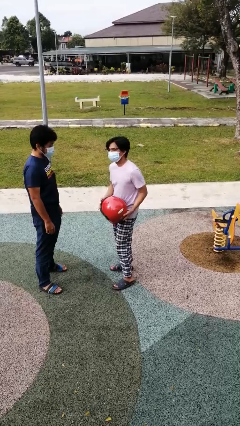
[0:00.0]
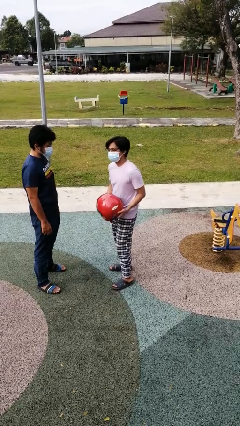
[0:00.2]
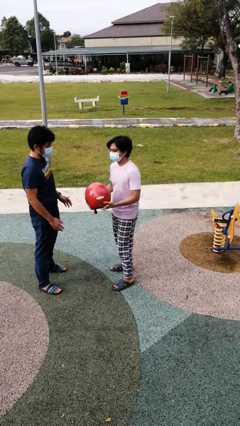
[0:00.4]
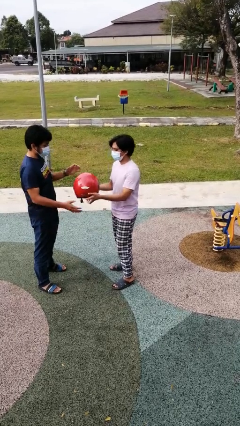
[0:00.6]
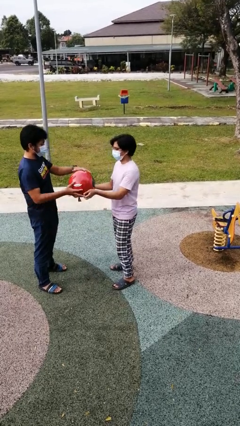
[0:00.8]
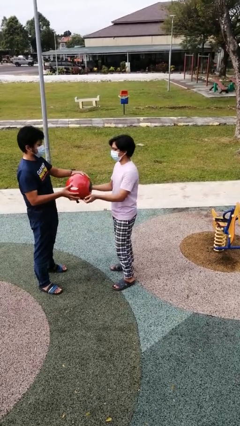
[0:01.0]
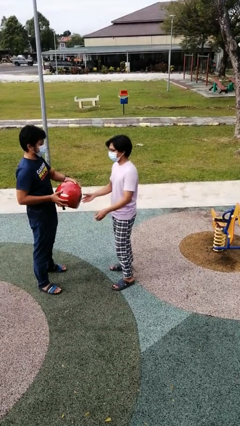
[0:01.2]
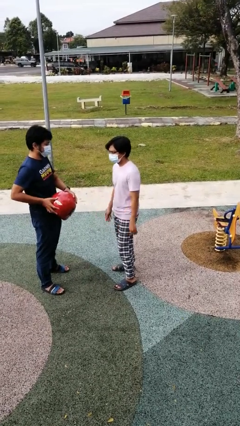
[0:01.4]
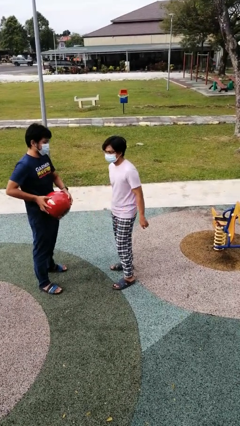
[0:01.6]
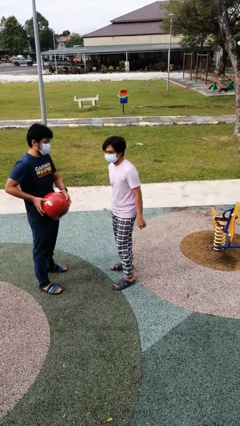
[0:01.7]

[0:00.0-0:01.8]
person transfers object to person

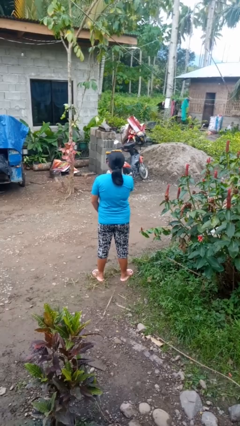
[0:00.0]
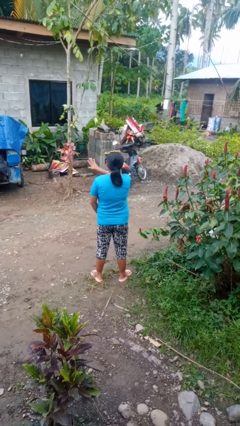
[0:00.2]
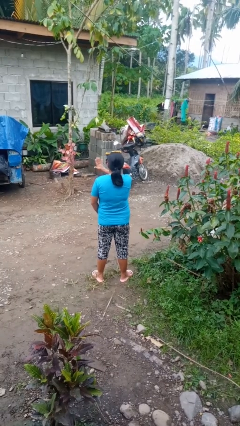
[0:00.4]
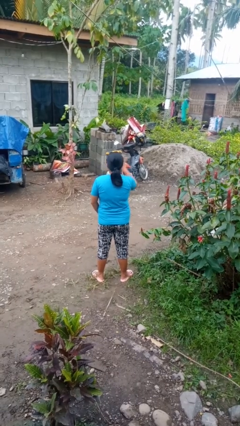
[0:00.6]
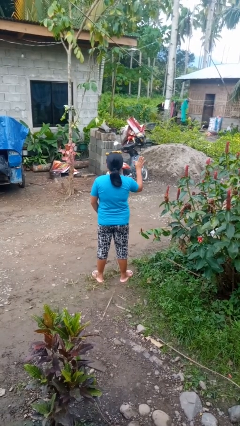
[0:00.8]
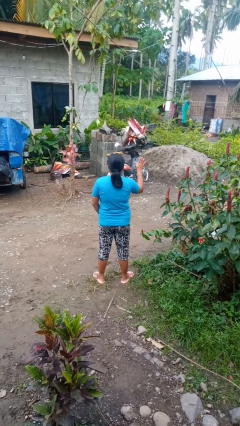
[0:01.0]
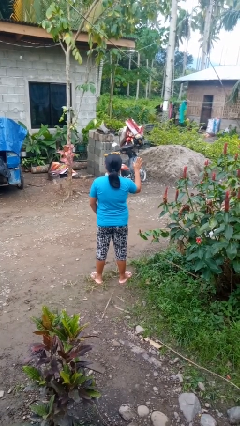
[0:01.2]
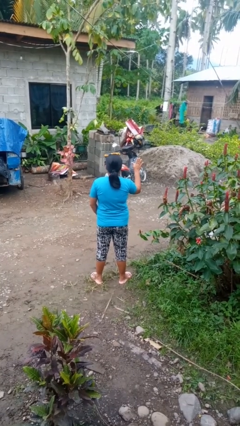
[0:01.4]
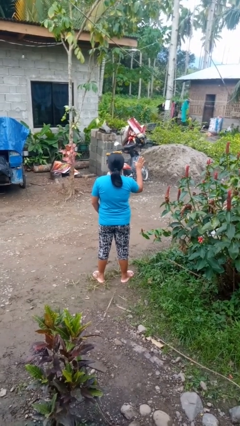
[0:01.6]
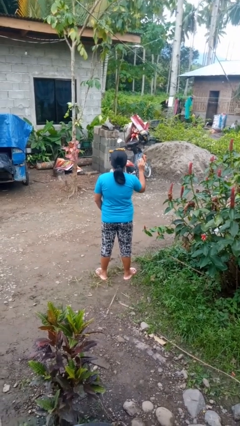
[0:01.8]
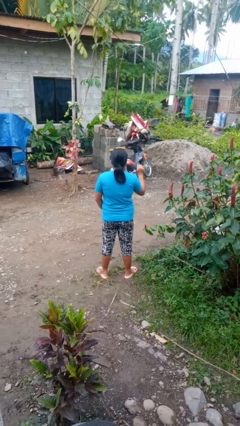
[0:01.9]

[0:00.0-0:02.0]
person gestures swipe right

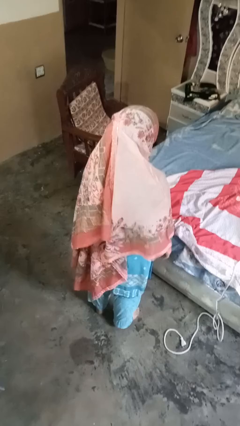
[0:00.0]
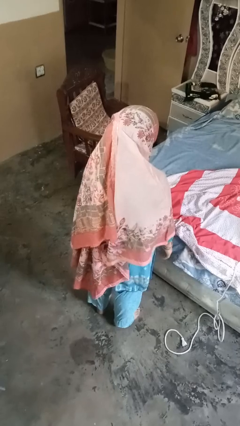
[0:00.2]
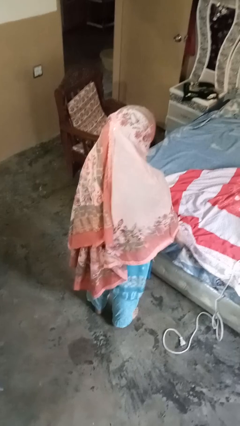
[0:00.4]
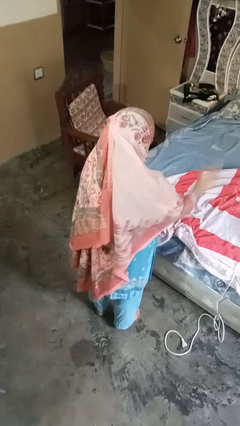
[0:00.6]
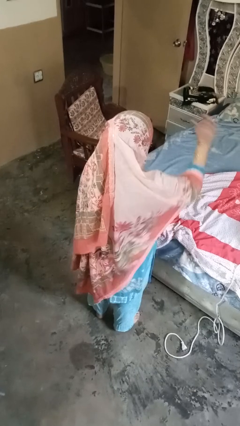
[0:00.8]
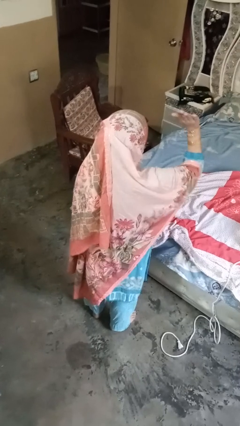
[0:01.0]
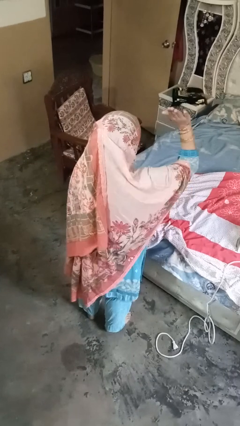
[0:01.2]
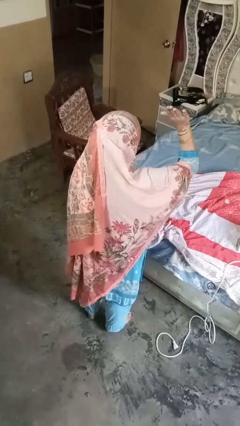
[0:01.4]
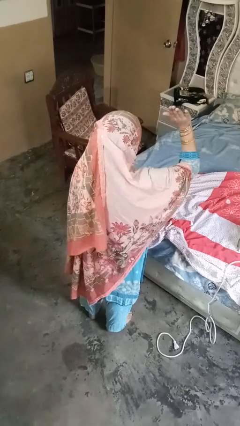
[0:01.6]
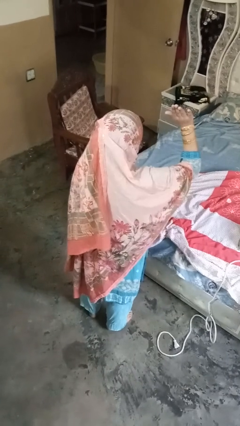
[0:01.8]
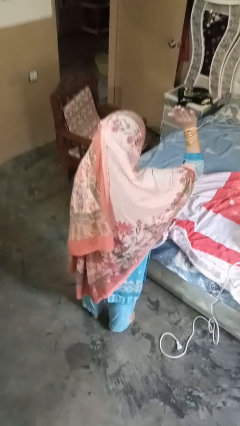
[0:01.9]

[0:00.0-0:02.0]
person handstand

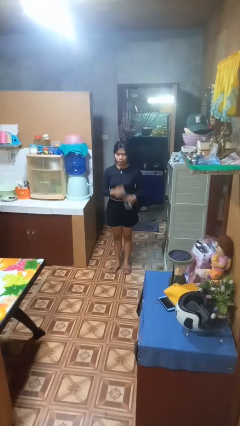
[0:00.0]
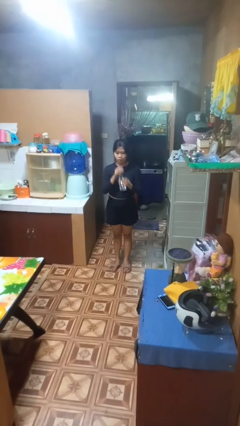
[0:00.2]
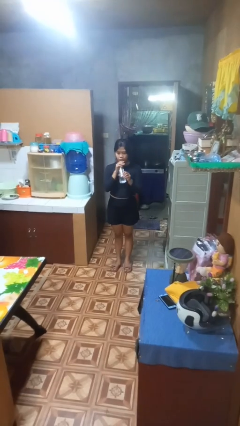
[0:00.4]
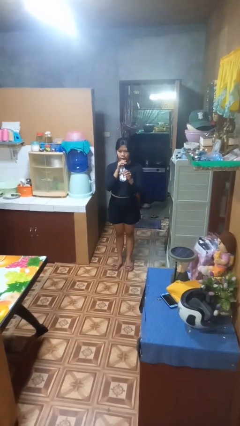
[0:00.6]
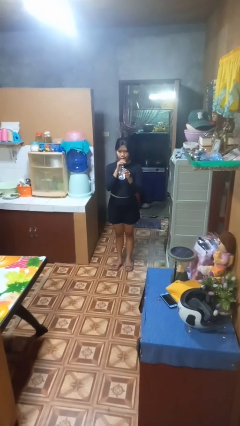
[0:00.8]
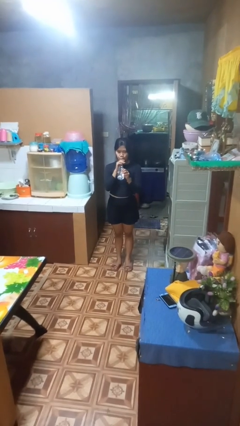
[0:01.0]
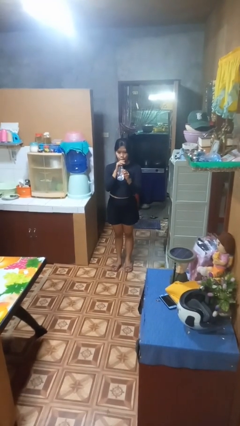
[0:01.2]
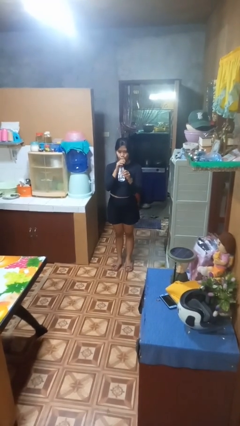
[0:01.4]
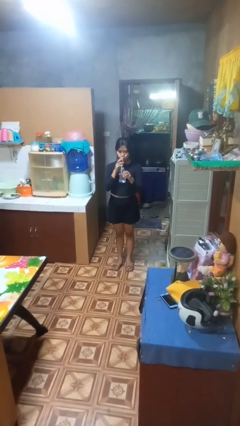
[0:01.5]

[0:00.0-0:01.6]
person drinks from straw

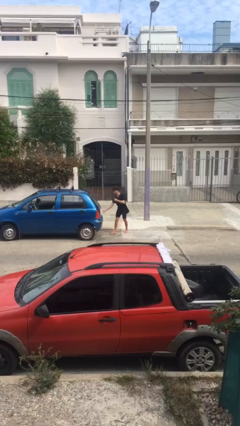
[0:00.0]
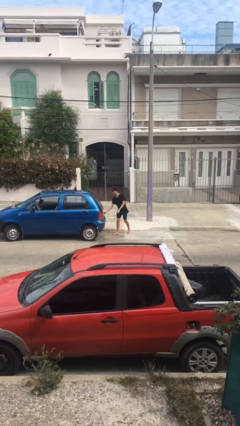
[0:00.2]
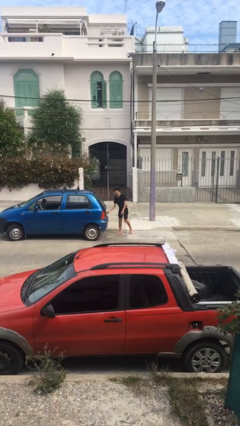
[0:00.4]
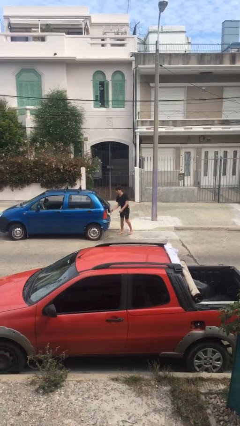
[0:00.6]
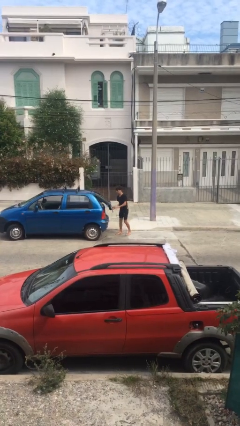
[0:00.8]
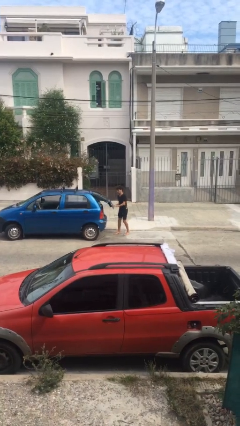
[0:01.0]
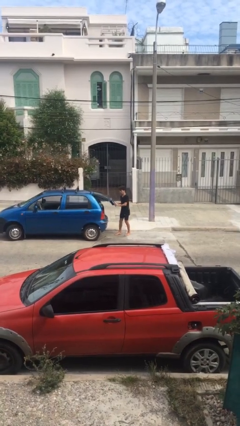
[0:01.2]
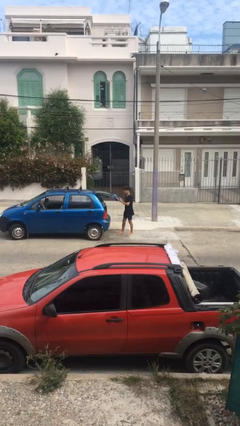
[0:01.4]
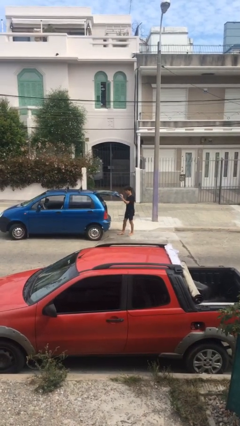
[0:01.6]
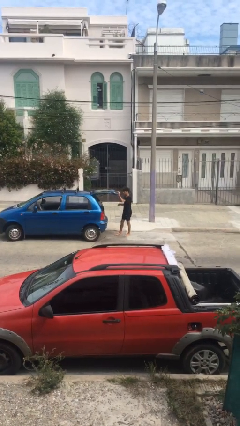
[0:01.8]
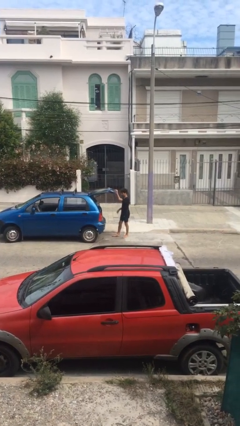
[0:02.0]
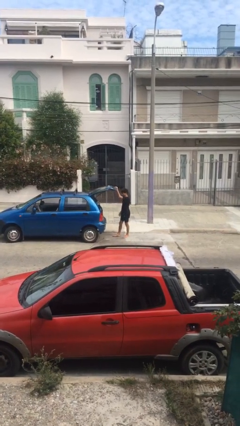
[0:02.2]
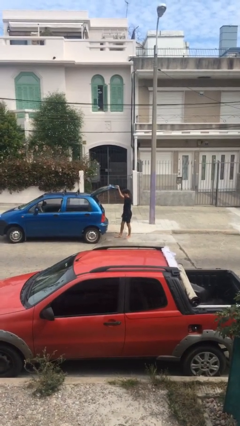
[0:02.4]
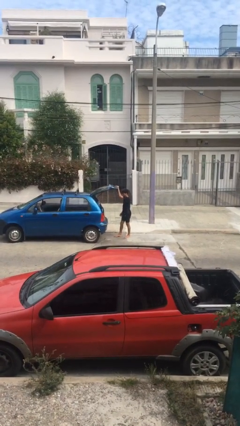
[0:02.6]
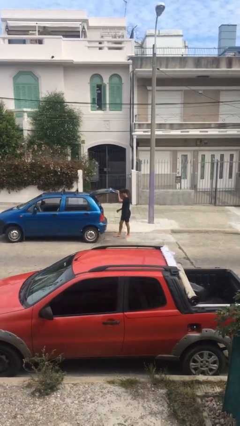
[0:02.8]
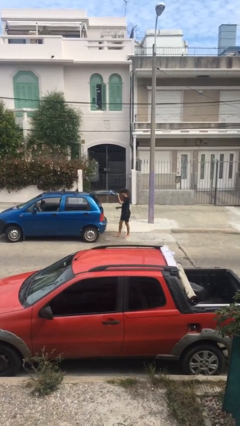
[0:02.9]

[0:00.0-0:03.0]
person opens car trunk

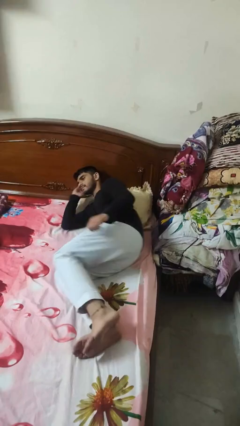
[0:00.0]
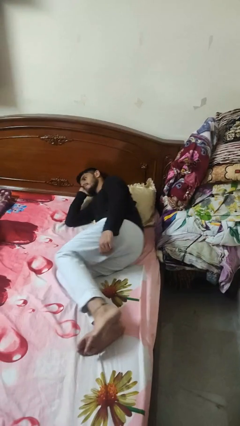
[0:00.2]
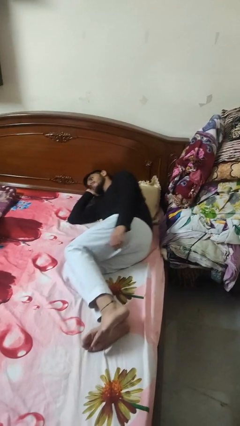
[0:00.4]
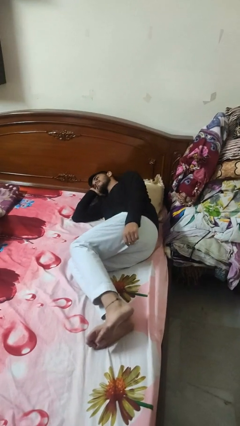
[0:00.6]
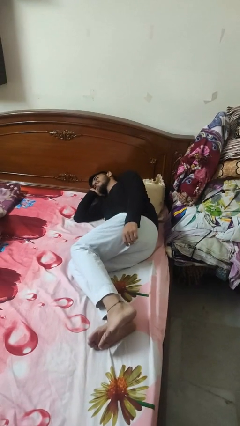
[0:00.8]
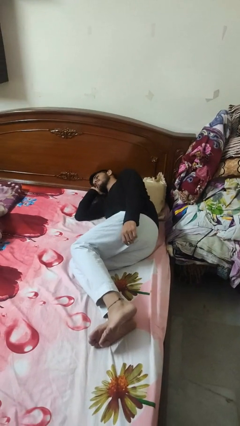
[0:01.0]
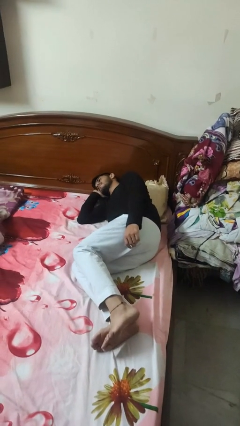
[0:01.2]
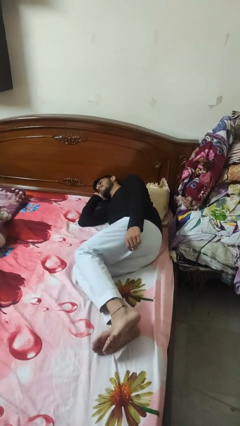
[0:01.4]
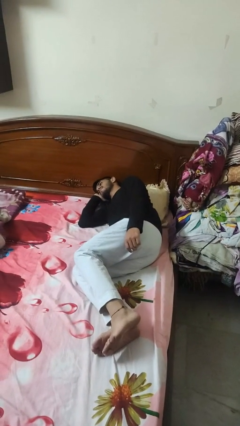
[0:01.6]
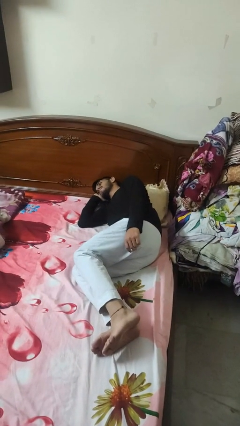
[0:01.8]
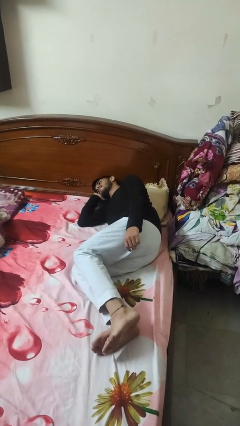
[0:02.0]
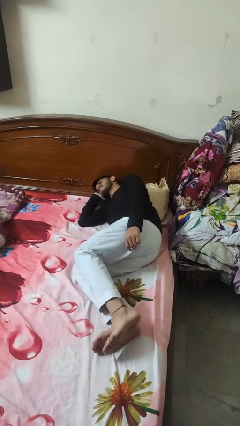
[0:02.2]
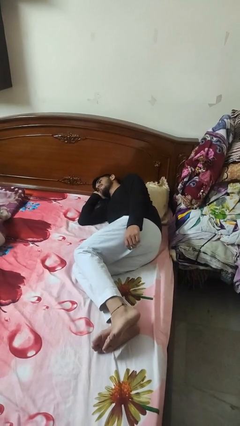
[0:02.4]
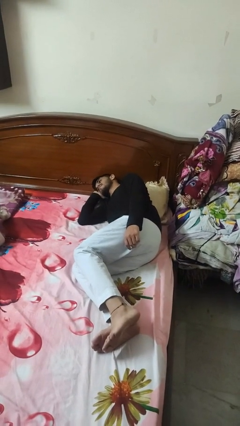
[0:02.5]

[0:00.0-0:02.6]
person lies down on bed

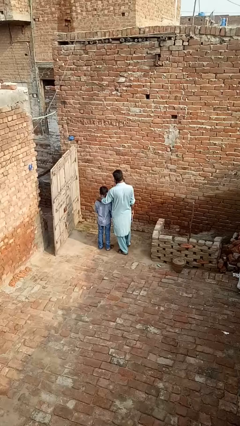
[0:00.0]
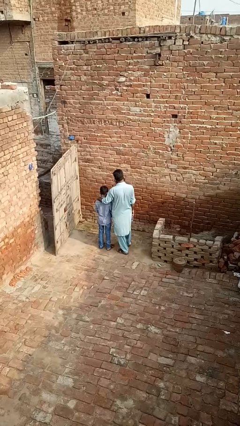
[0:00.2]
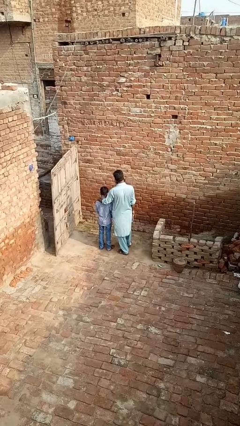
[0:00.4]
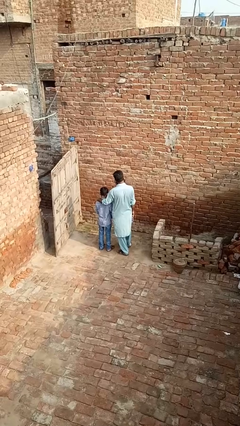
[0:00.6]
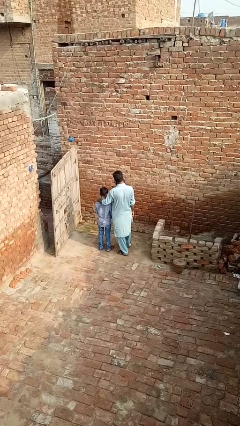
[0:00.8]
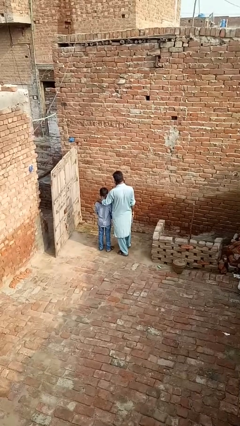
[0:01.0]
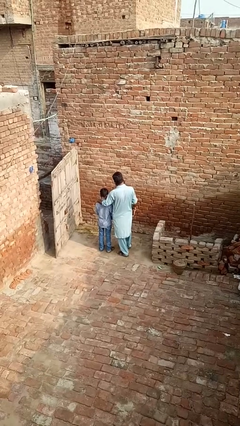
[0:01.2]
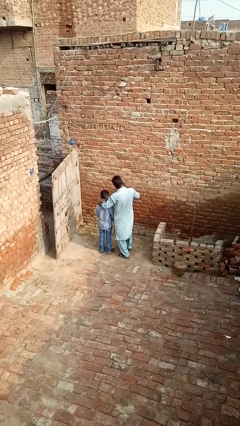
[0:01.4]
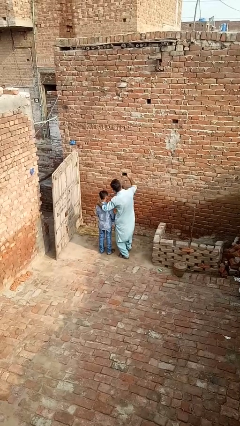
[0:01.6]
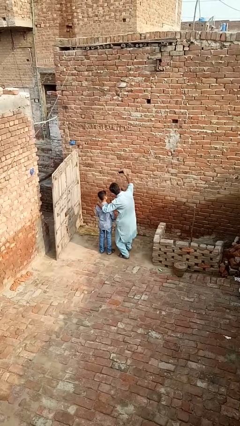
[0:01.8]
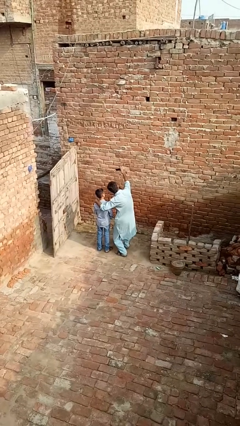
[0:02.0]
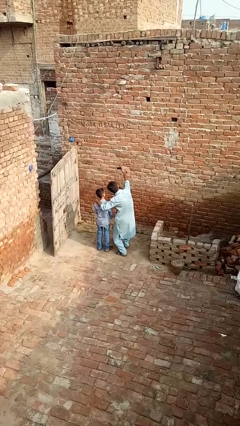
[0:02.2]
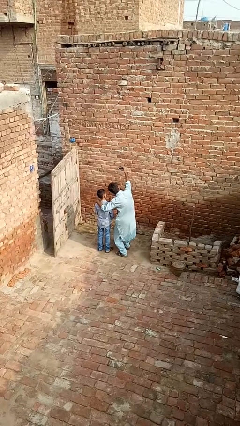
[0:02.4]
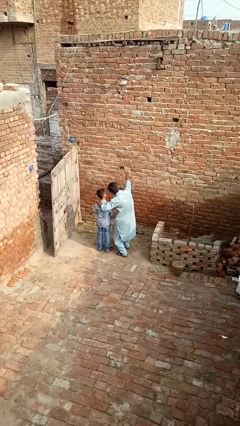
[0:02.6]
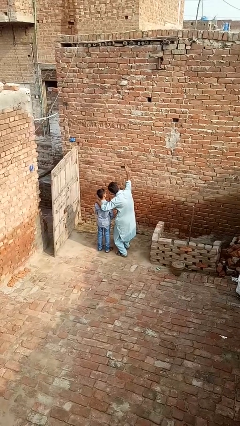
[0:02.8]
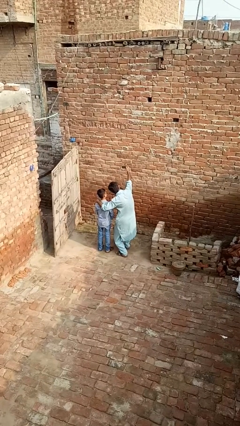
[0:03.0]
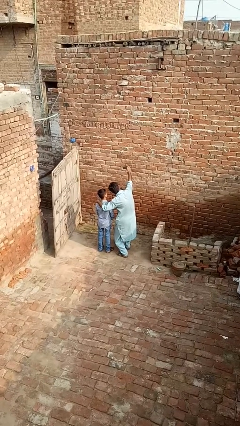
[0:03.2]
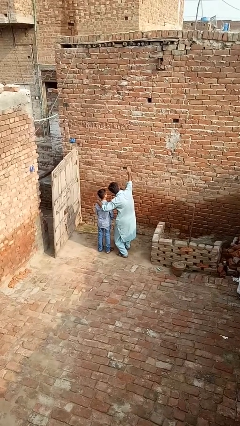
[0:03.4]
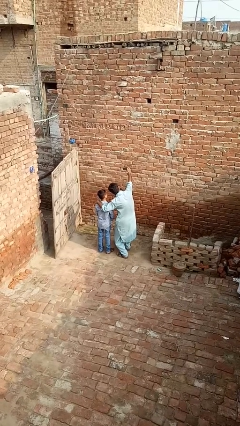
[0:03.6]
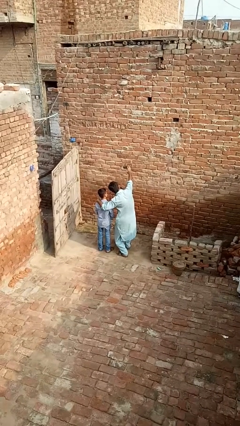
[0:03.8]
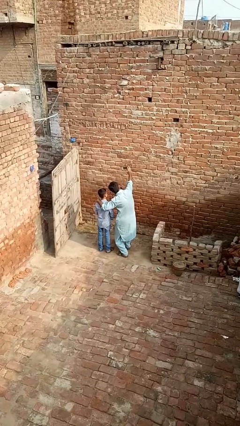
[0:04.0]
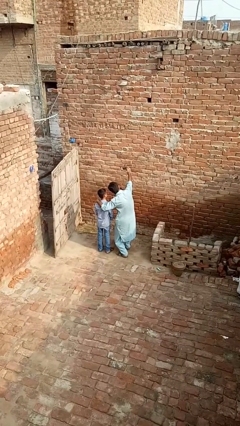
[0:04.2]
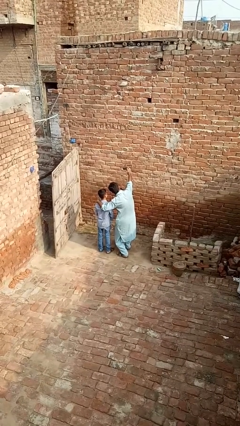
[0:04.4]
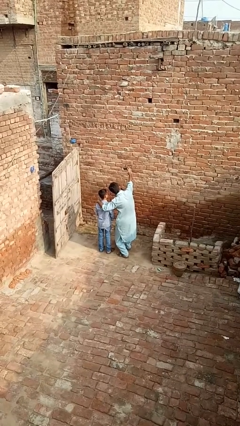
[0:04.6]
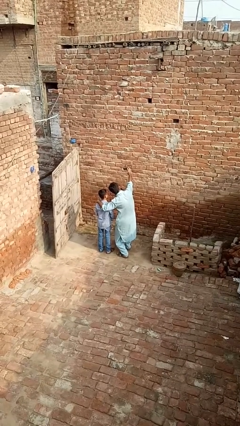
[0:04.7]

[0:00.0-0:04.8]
person takes selfie with person
